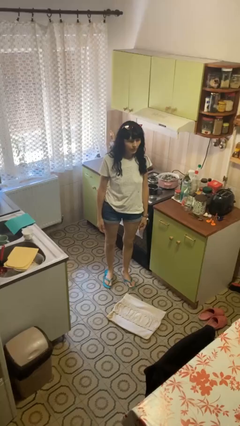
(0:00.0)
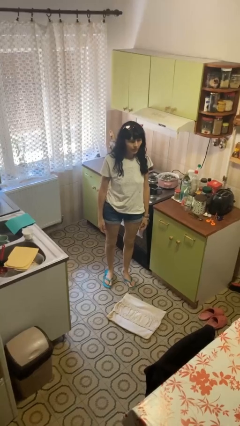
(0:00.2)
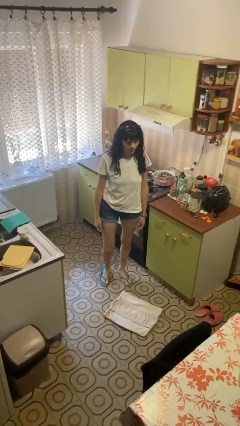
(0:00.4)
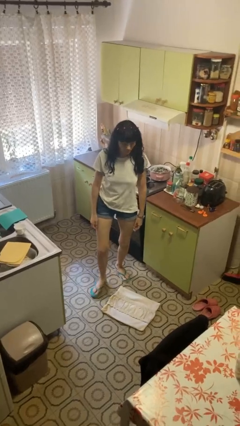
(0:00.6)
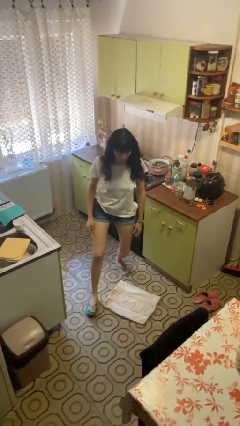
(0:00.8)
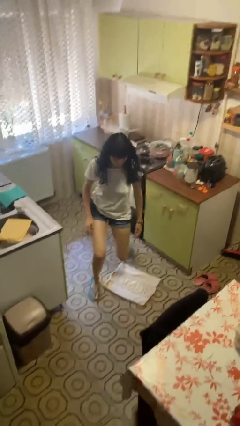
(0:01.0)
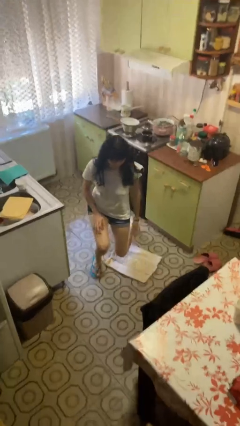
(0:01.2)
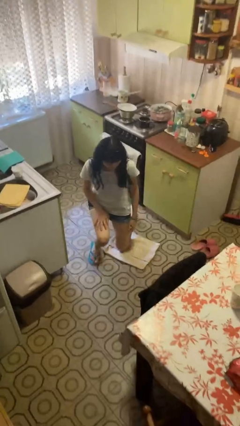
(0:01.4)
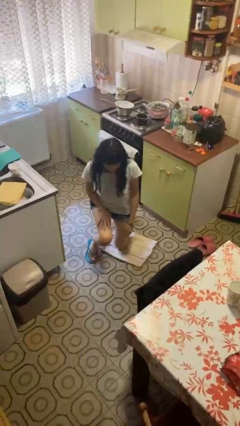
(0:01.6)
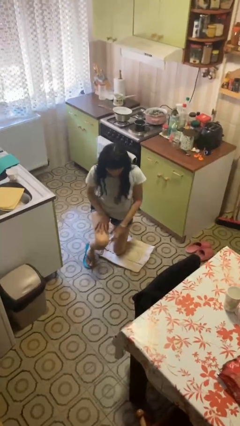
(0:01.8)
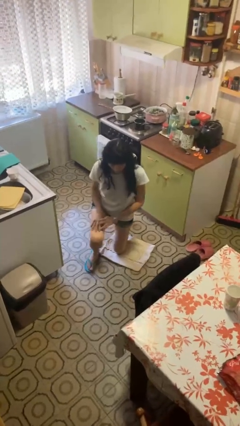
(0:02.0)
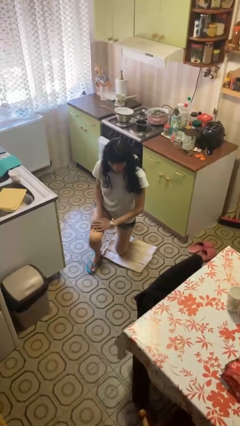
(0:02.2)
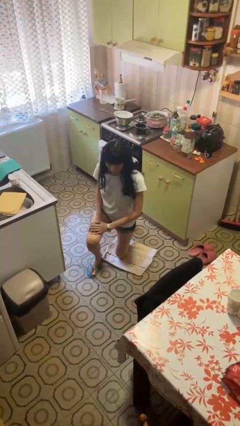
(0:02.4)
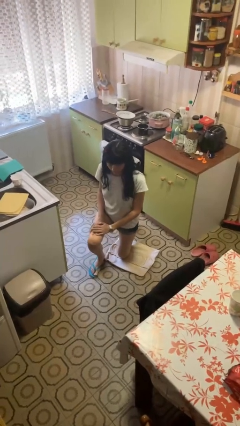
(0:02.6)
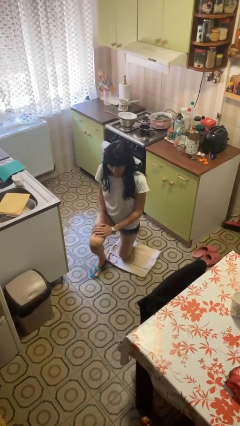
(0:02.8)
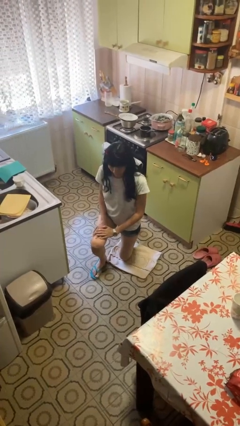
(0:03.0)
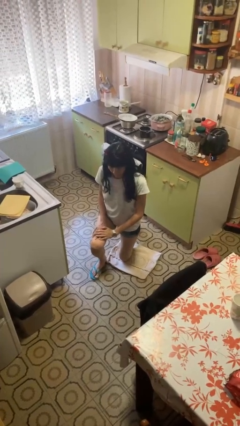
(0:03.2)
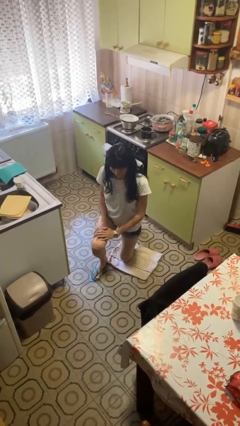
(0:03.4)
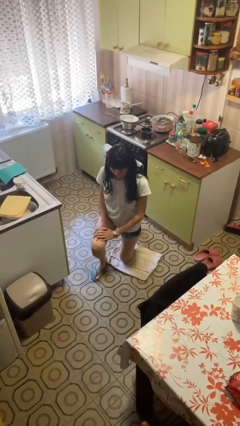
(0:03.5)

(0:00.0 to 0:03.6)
person kneels

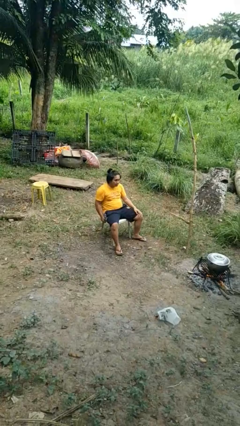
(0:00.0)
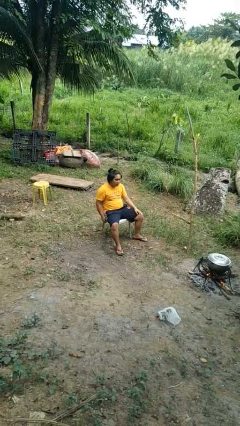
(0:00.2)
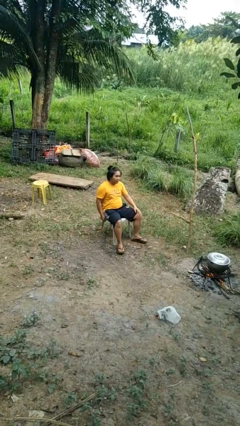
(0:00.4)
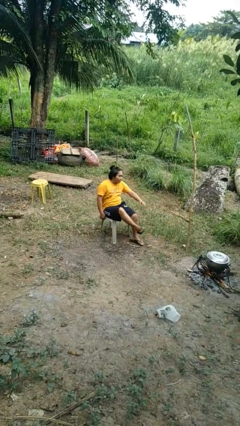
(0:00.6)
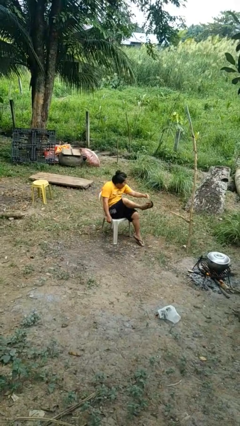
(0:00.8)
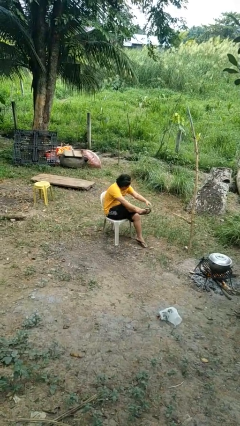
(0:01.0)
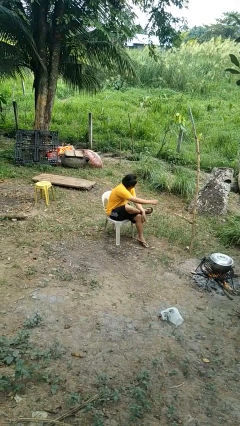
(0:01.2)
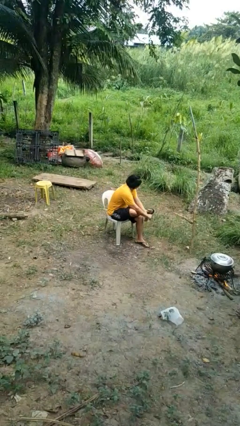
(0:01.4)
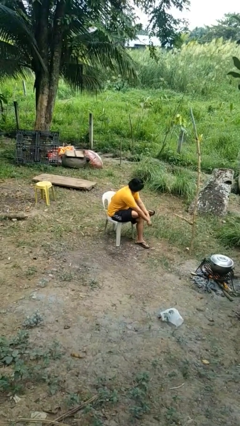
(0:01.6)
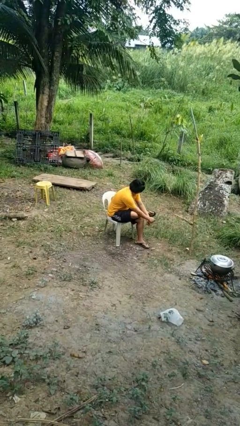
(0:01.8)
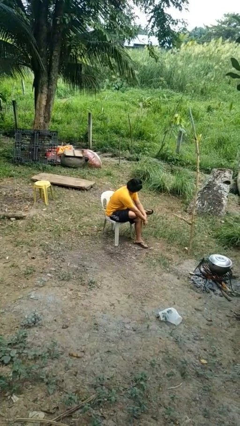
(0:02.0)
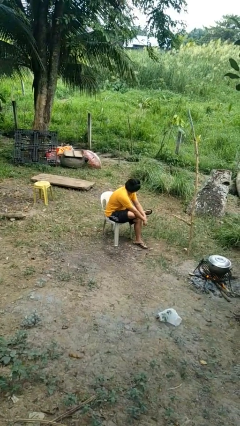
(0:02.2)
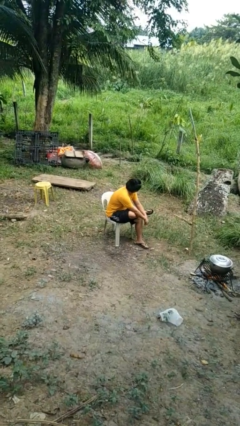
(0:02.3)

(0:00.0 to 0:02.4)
person crosses legs

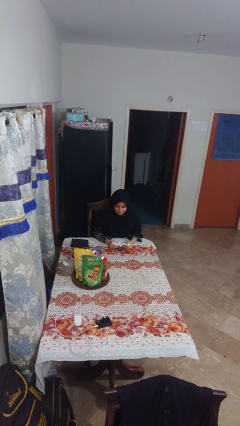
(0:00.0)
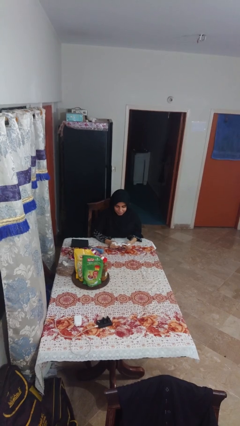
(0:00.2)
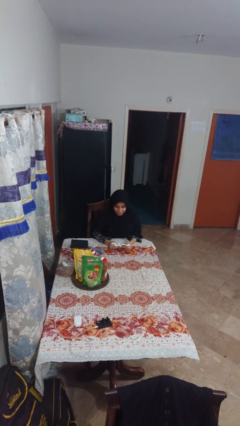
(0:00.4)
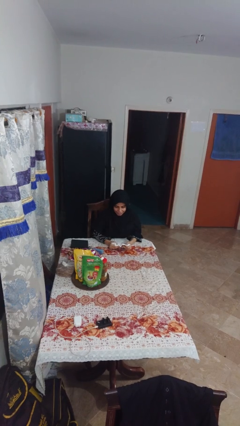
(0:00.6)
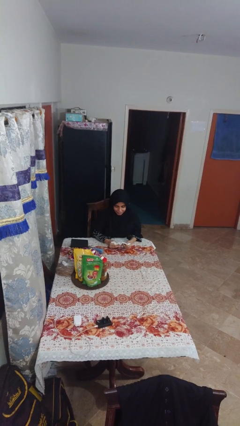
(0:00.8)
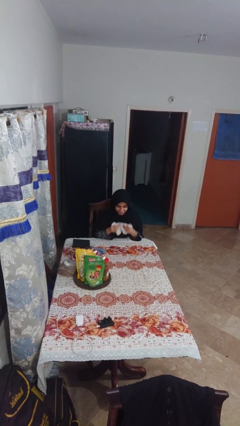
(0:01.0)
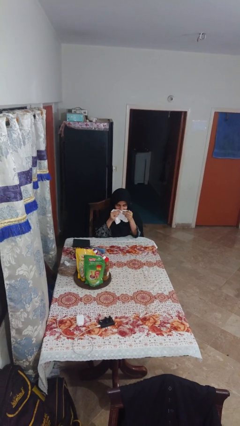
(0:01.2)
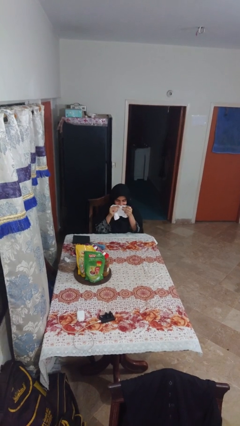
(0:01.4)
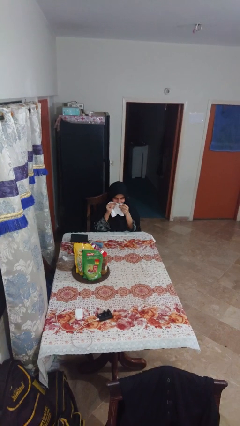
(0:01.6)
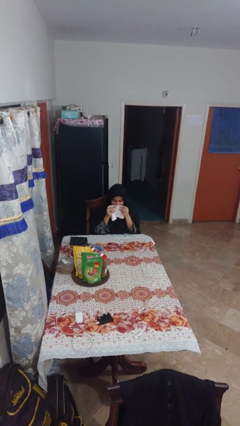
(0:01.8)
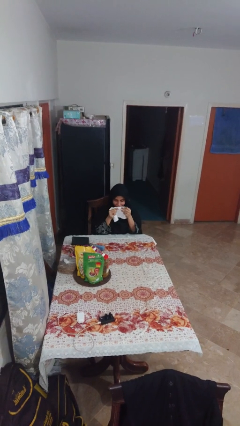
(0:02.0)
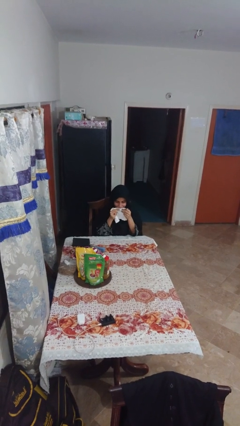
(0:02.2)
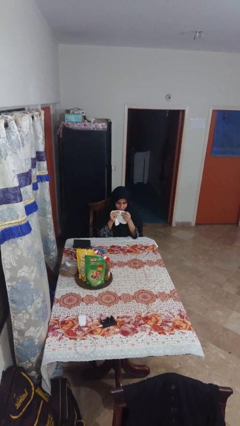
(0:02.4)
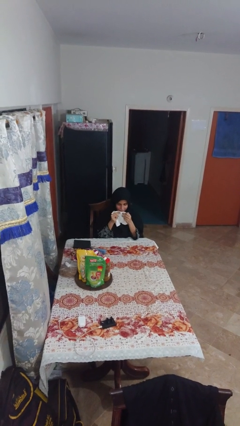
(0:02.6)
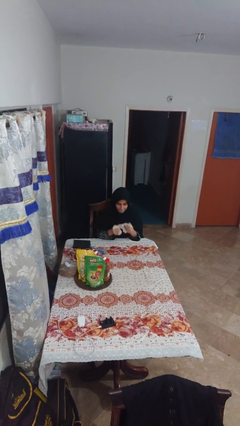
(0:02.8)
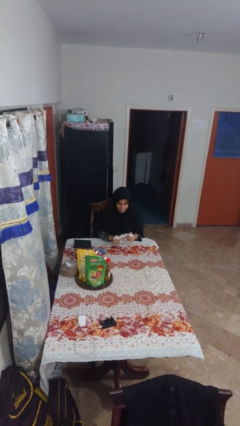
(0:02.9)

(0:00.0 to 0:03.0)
person wipes mouth with napkin

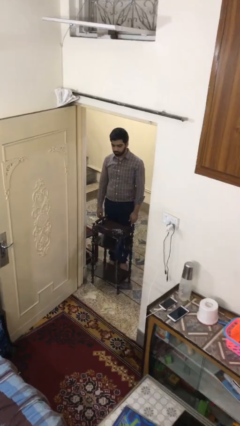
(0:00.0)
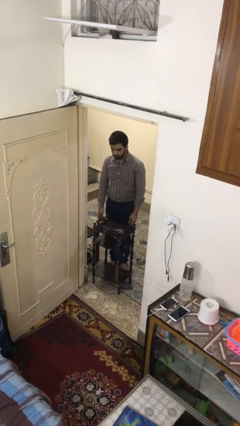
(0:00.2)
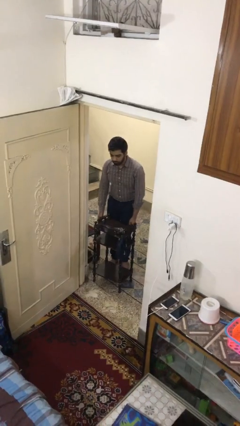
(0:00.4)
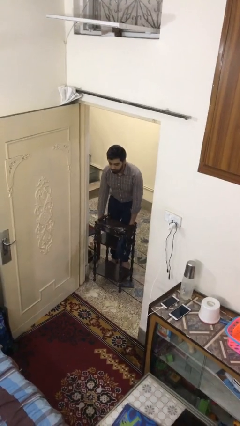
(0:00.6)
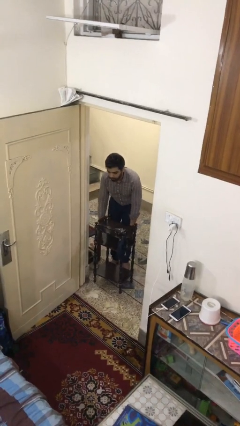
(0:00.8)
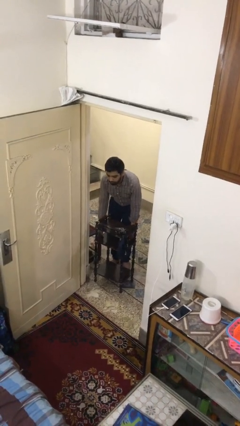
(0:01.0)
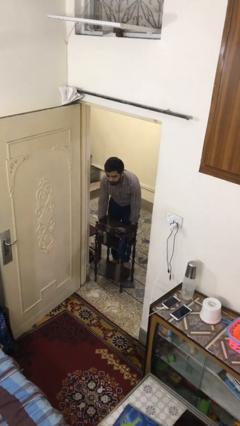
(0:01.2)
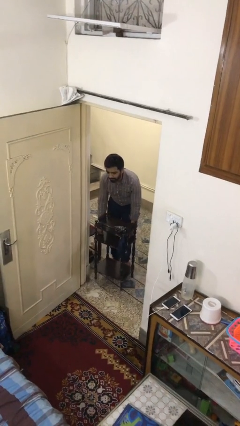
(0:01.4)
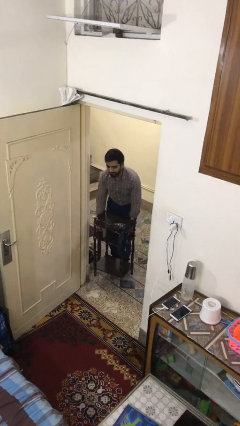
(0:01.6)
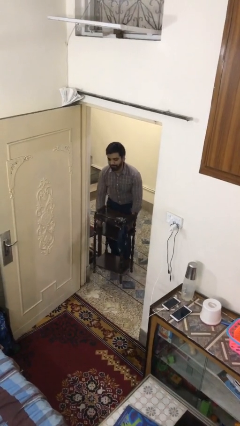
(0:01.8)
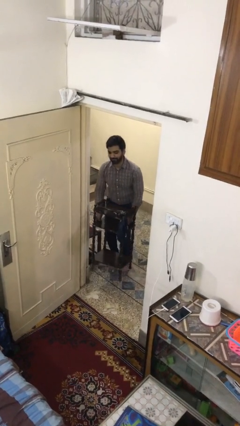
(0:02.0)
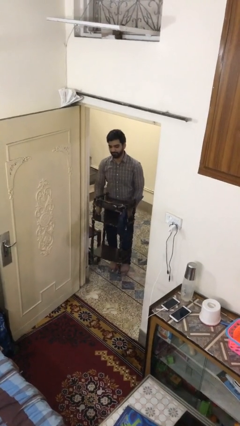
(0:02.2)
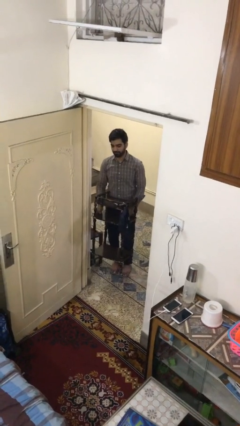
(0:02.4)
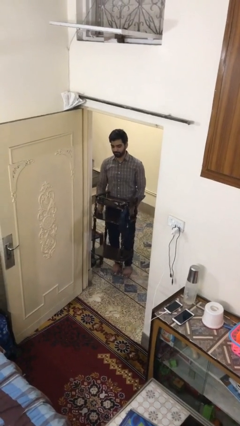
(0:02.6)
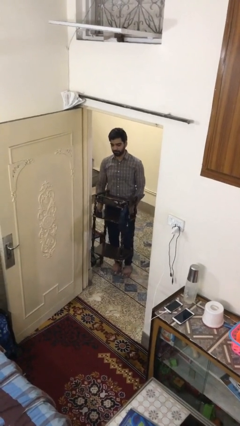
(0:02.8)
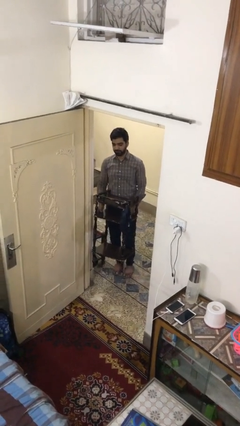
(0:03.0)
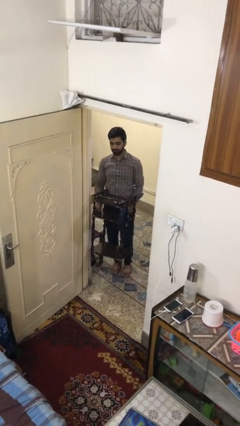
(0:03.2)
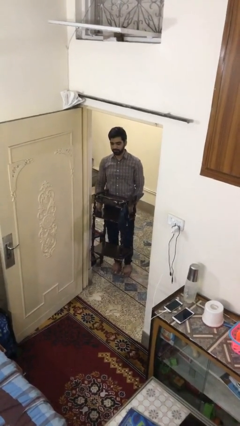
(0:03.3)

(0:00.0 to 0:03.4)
person picks up object from floor

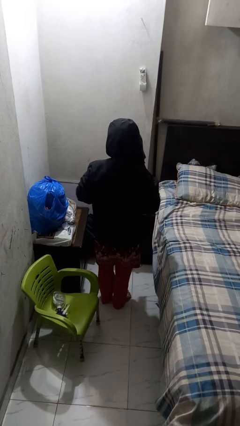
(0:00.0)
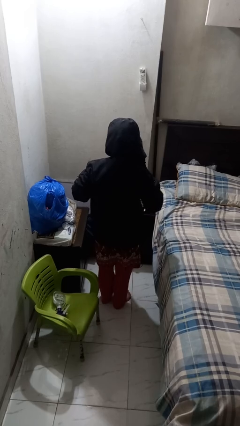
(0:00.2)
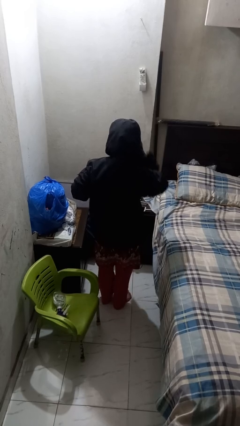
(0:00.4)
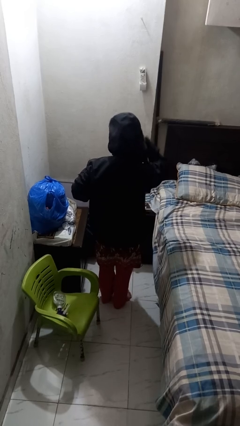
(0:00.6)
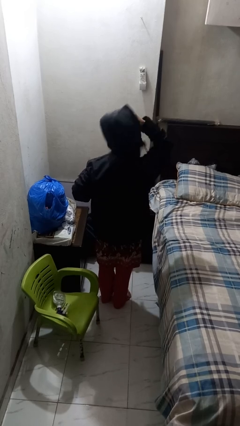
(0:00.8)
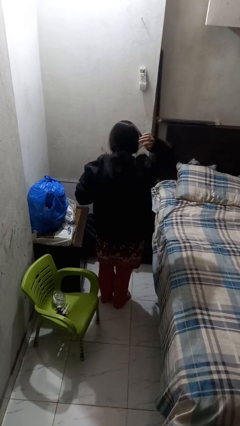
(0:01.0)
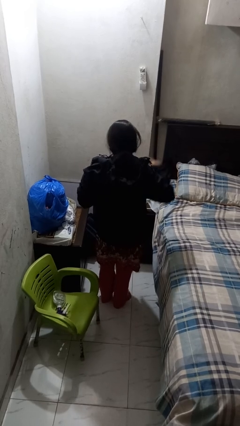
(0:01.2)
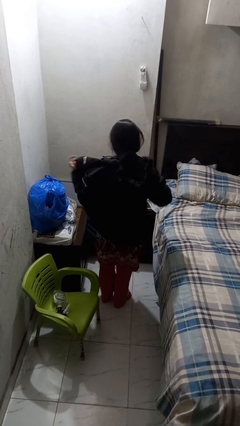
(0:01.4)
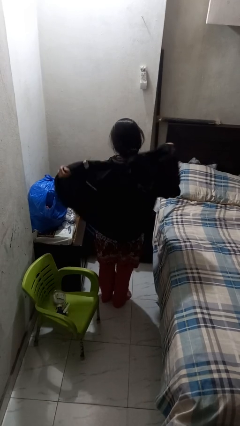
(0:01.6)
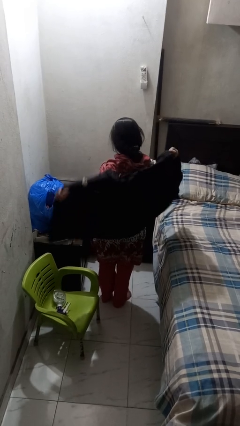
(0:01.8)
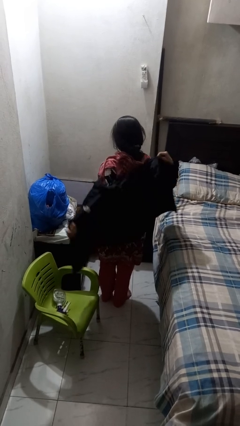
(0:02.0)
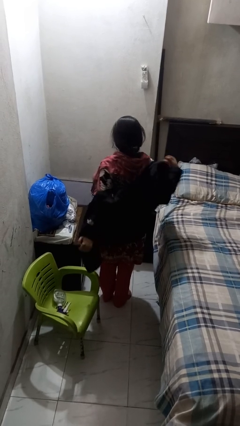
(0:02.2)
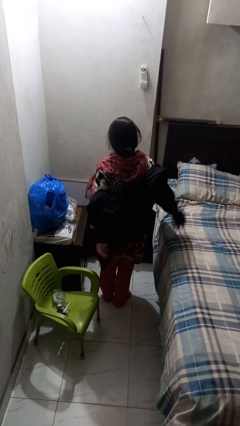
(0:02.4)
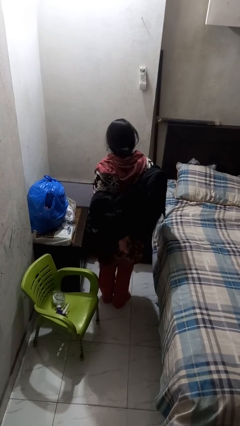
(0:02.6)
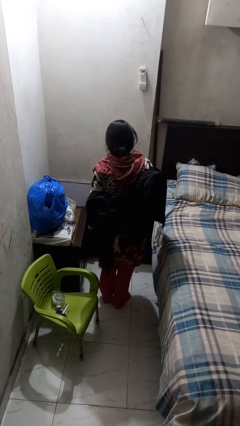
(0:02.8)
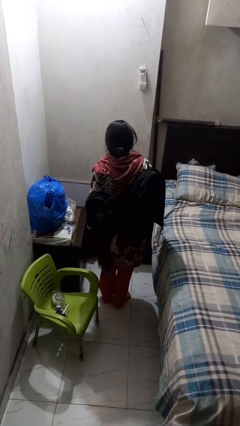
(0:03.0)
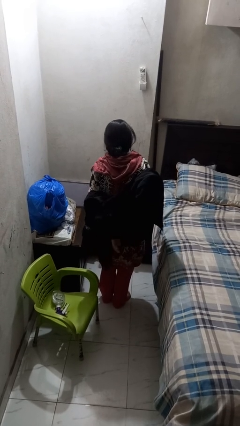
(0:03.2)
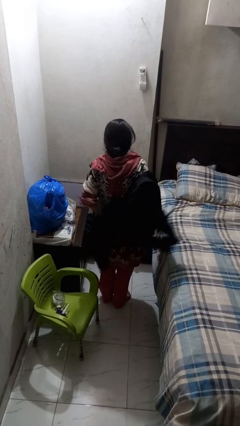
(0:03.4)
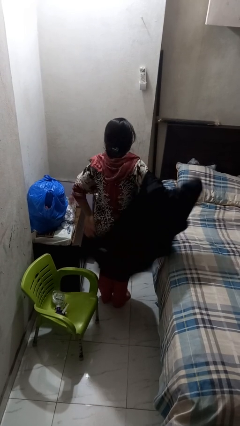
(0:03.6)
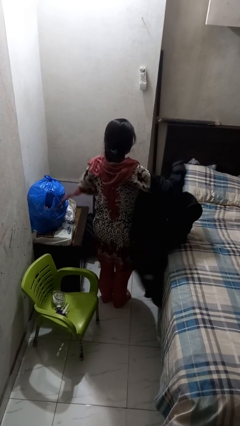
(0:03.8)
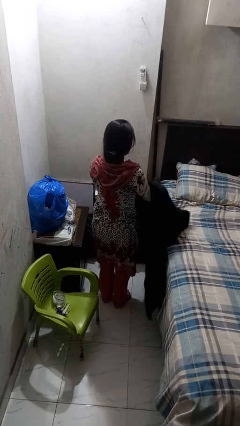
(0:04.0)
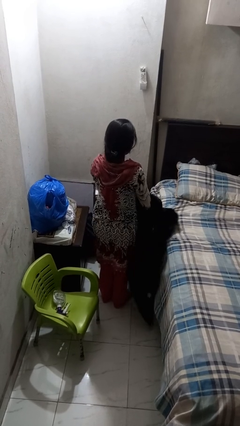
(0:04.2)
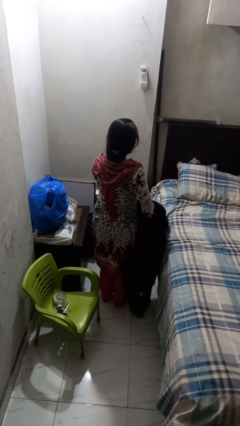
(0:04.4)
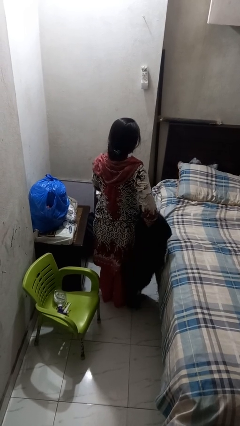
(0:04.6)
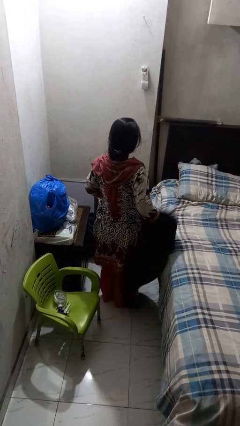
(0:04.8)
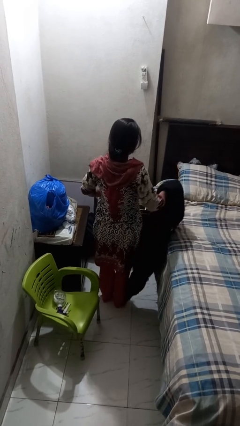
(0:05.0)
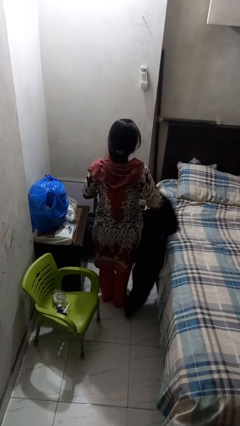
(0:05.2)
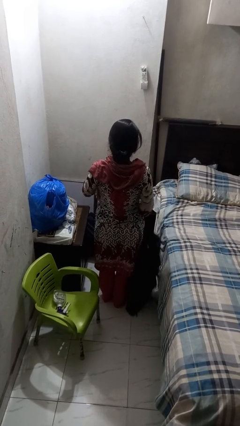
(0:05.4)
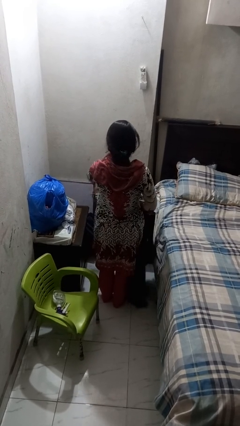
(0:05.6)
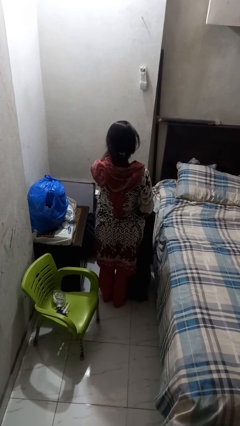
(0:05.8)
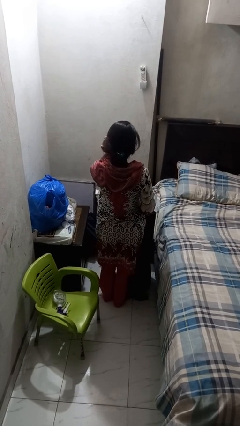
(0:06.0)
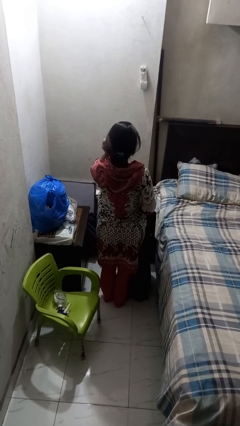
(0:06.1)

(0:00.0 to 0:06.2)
person takes off hoodie
